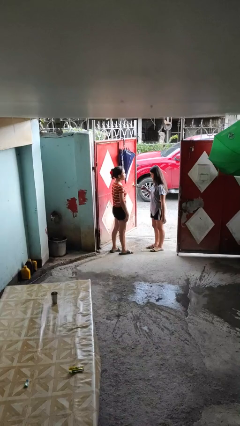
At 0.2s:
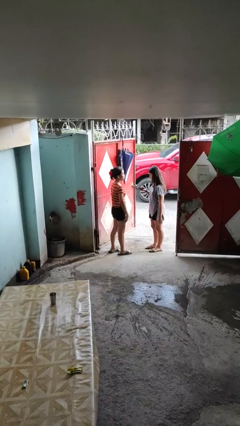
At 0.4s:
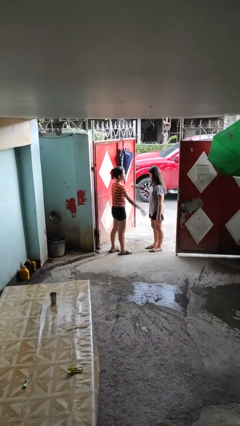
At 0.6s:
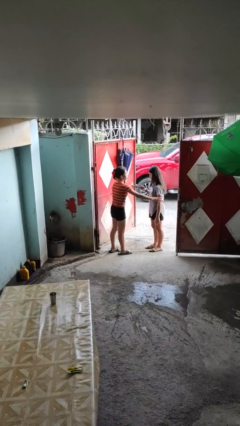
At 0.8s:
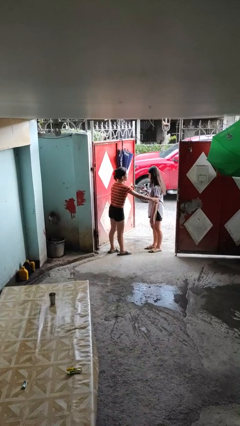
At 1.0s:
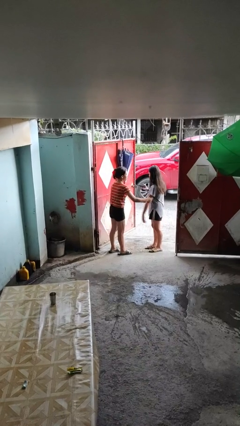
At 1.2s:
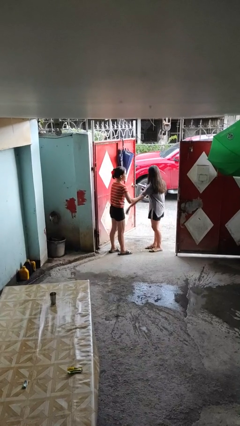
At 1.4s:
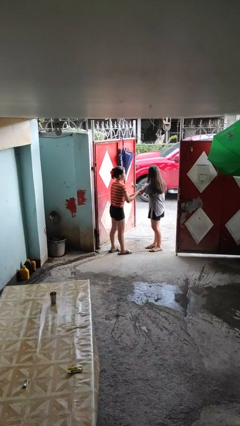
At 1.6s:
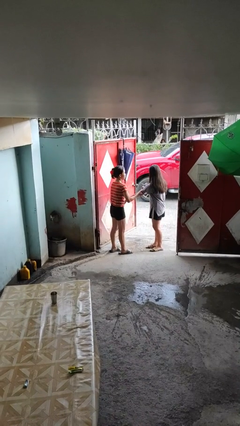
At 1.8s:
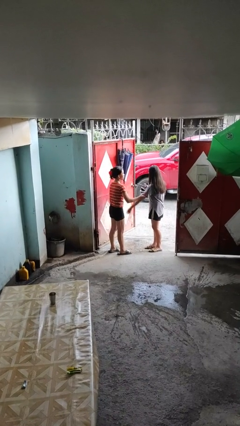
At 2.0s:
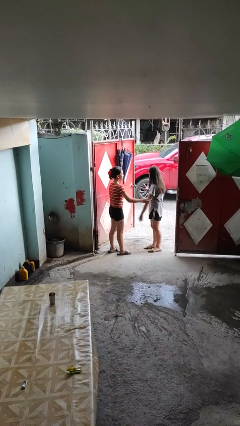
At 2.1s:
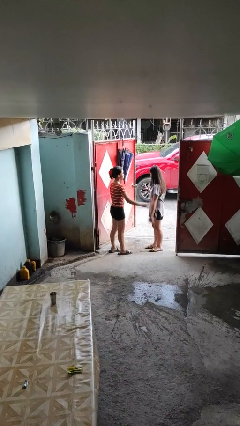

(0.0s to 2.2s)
person grabs person by bicep

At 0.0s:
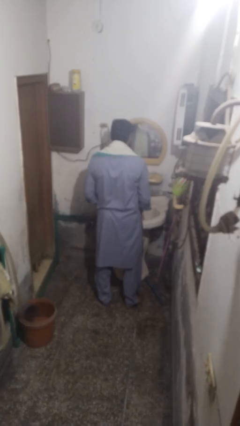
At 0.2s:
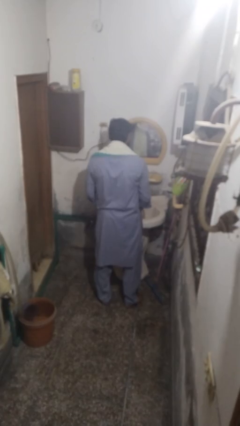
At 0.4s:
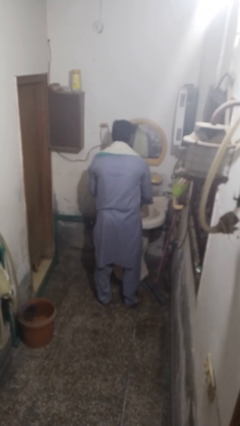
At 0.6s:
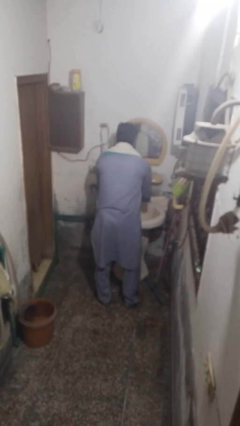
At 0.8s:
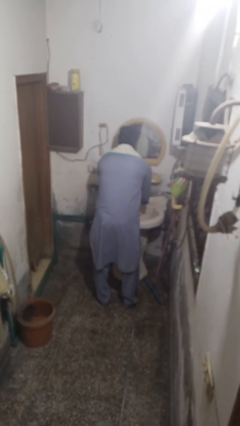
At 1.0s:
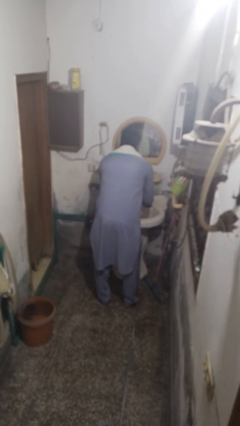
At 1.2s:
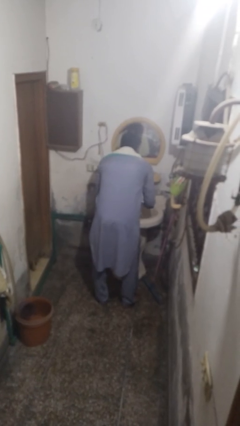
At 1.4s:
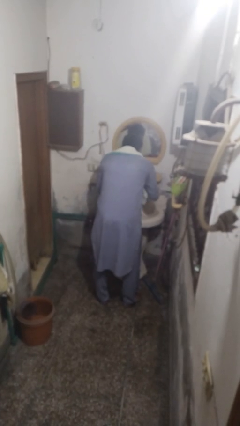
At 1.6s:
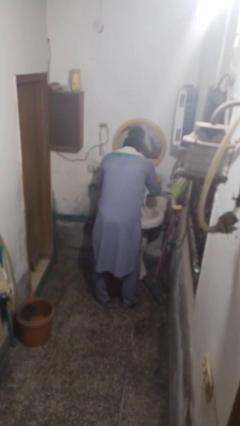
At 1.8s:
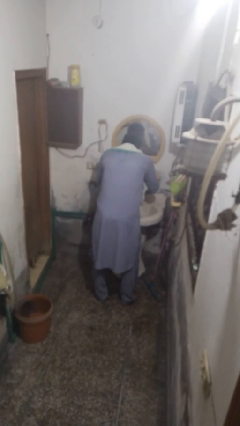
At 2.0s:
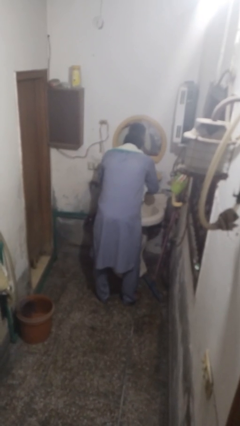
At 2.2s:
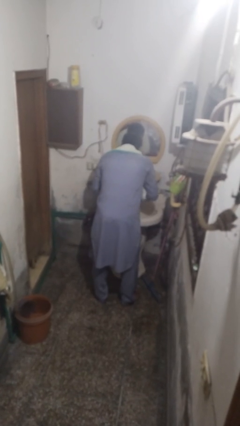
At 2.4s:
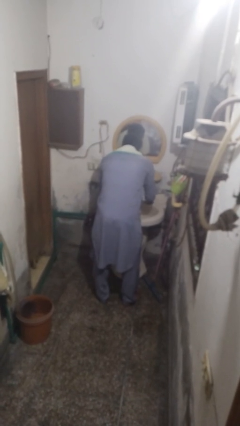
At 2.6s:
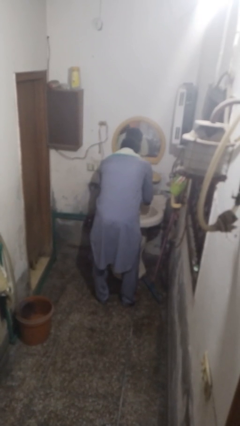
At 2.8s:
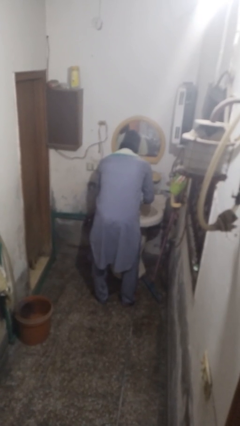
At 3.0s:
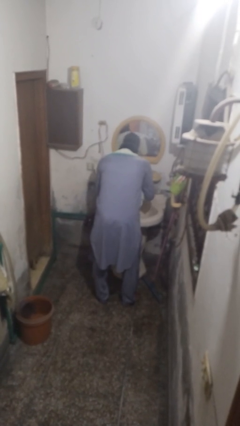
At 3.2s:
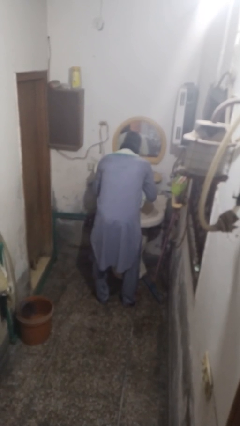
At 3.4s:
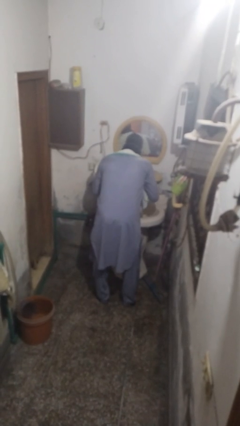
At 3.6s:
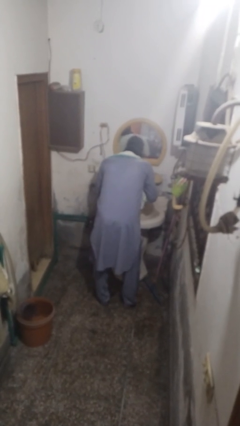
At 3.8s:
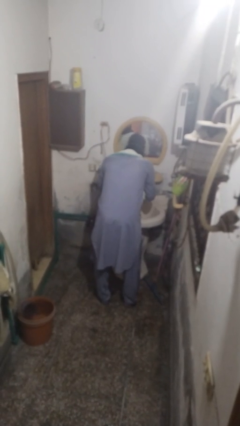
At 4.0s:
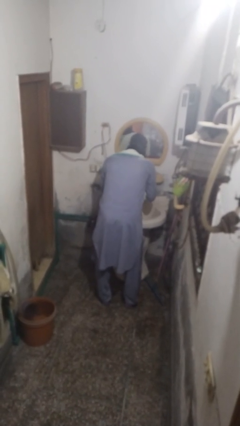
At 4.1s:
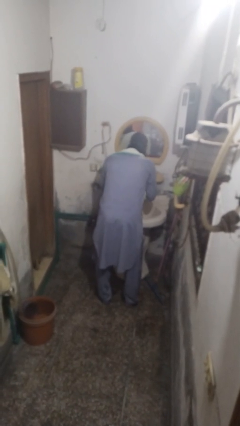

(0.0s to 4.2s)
person washes face

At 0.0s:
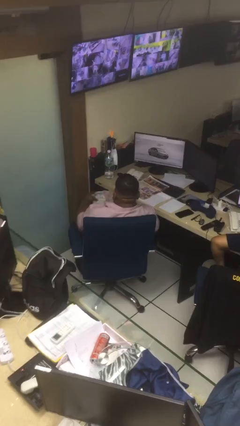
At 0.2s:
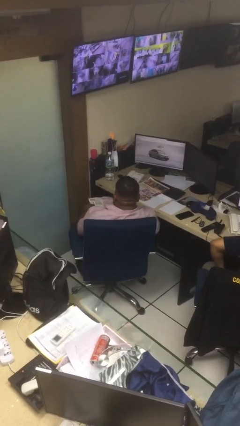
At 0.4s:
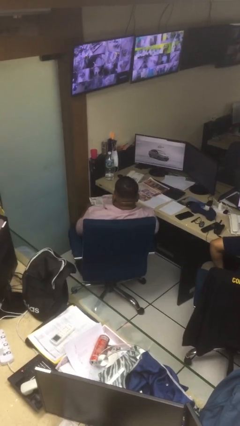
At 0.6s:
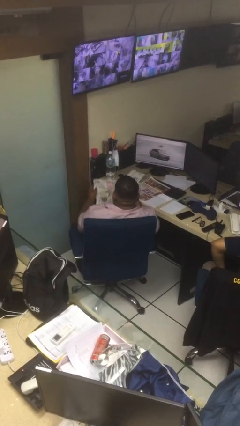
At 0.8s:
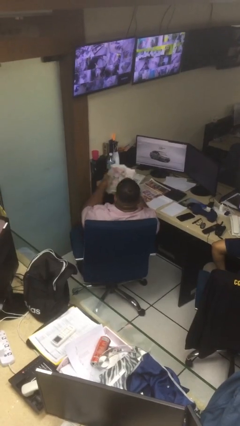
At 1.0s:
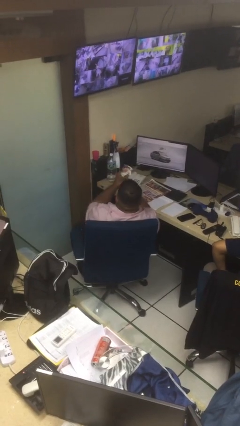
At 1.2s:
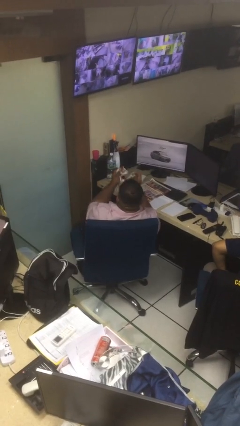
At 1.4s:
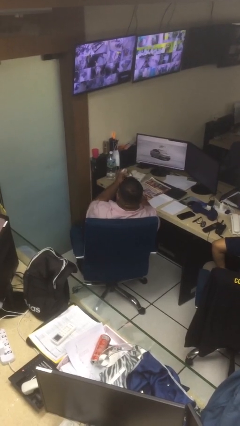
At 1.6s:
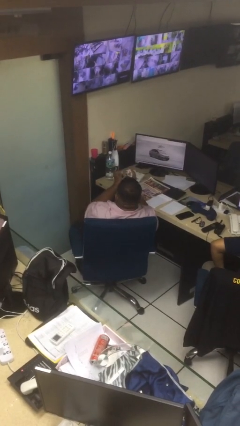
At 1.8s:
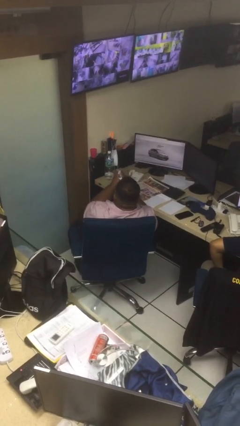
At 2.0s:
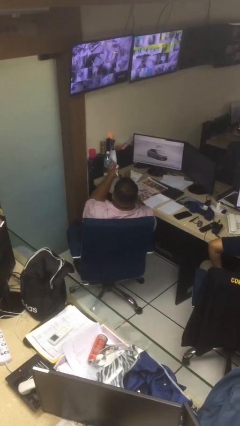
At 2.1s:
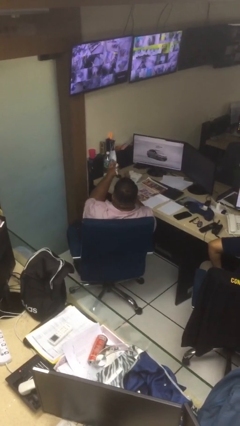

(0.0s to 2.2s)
person crumples paper

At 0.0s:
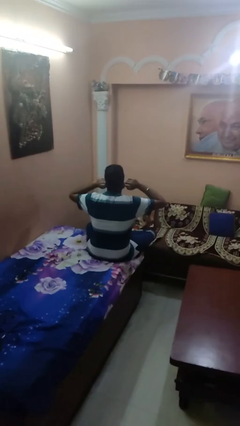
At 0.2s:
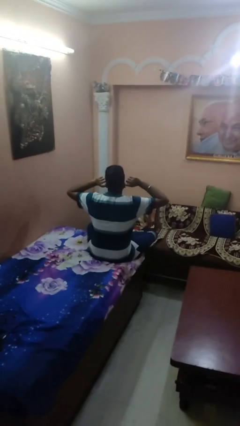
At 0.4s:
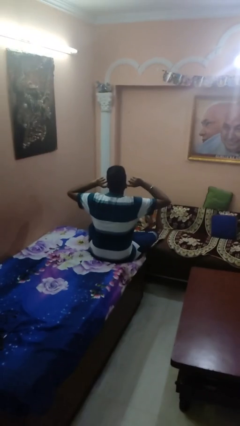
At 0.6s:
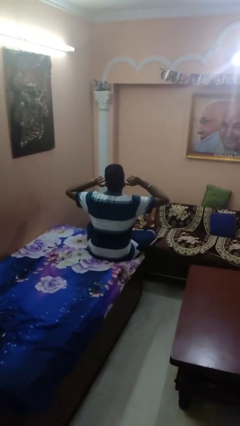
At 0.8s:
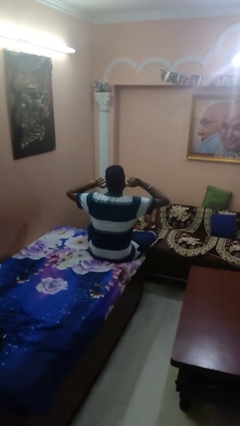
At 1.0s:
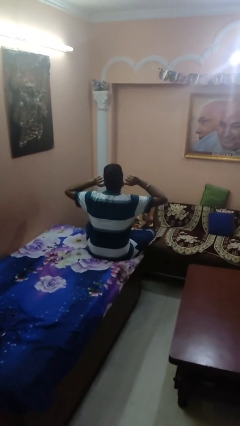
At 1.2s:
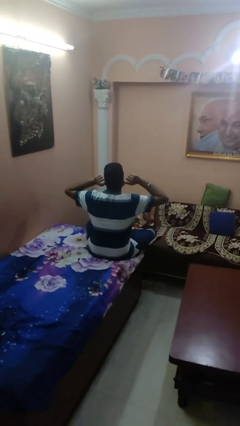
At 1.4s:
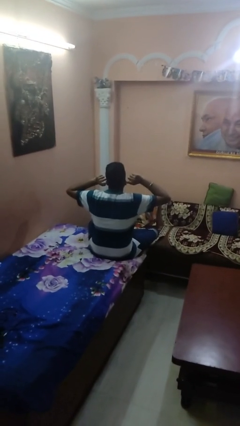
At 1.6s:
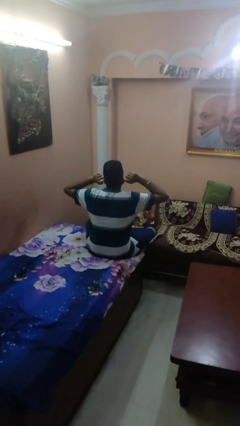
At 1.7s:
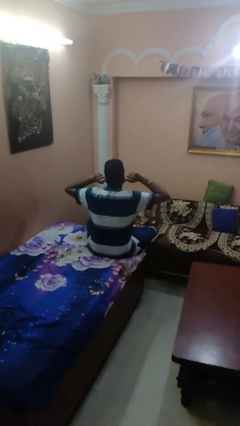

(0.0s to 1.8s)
person puts fingers in ear

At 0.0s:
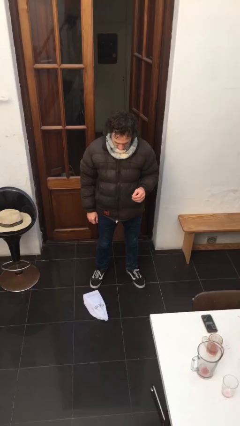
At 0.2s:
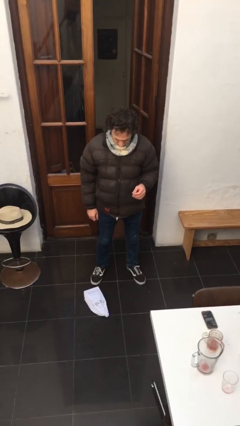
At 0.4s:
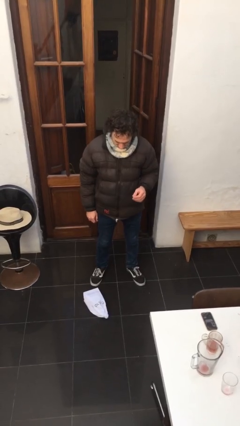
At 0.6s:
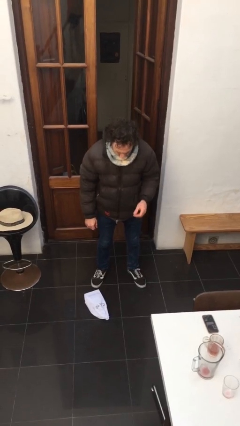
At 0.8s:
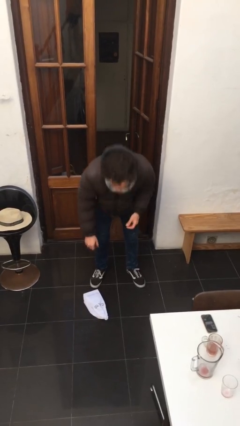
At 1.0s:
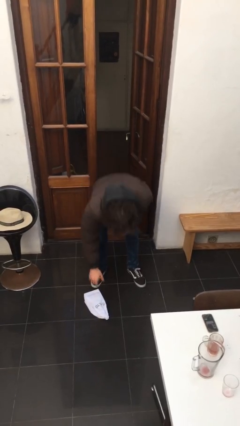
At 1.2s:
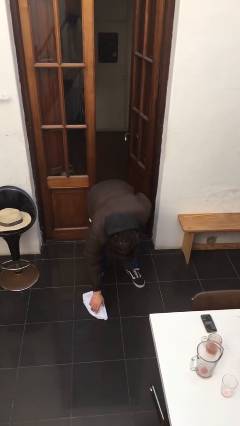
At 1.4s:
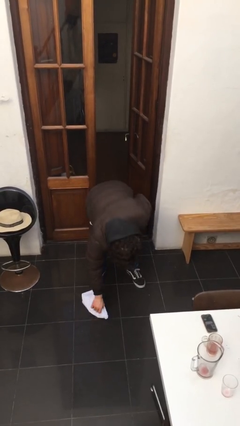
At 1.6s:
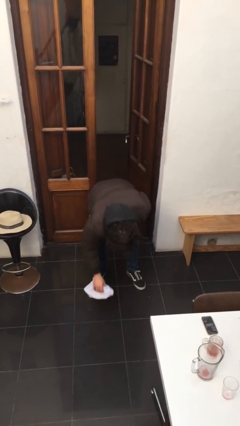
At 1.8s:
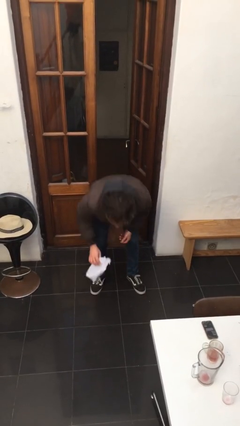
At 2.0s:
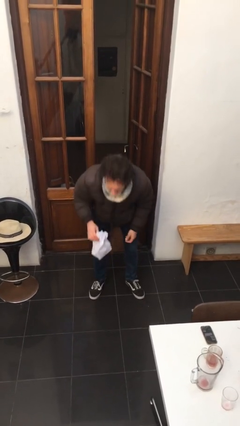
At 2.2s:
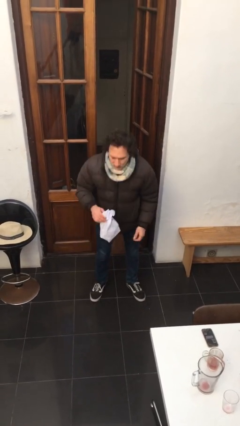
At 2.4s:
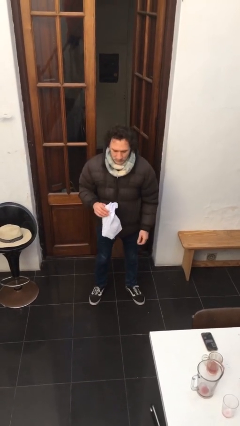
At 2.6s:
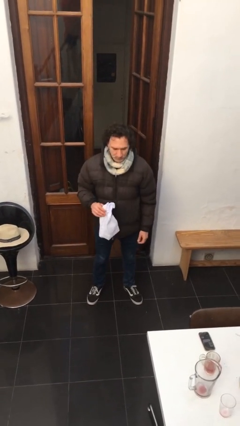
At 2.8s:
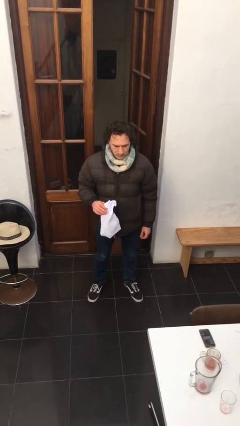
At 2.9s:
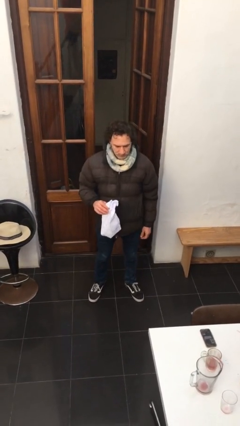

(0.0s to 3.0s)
person picks up object from floor

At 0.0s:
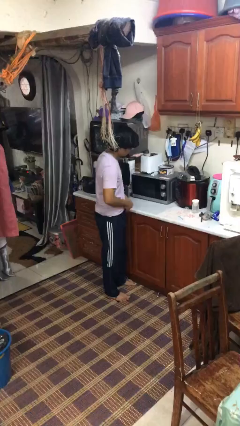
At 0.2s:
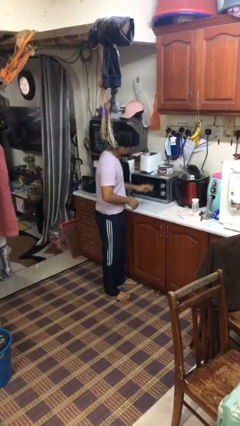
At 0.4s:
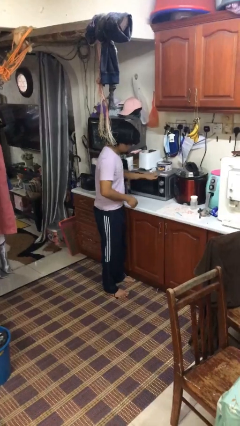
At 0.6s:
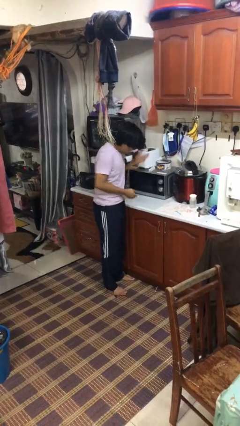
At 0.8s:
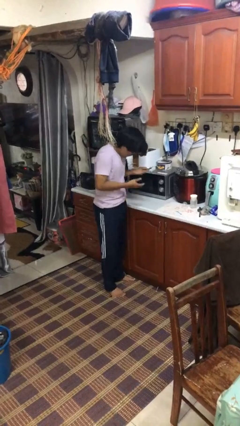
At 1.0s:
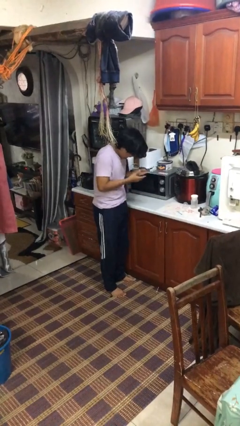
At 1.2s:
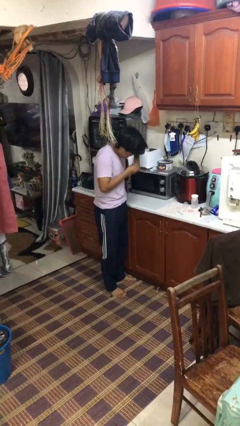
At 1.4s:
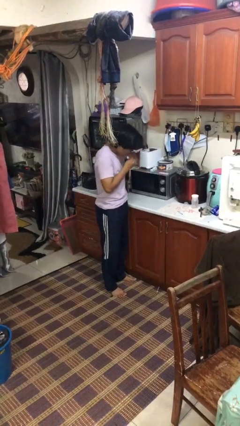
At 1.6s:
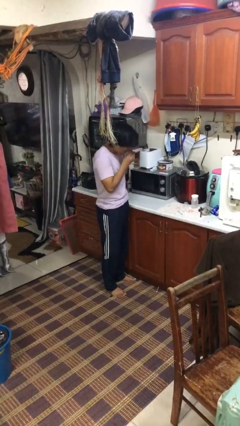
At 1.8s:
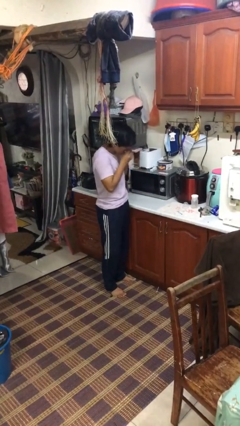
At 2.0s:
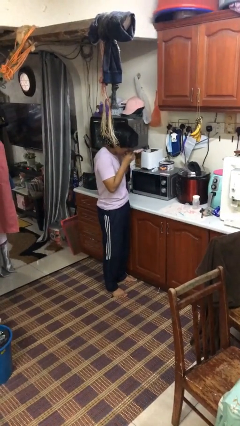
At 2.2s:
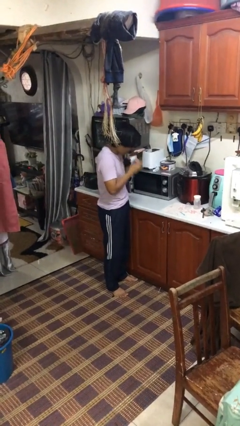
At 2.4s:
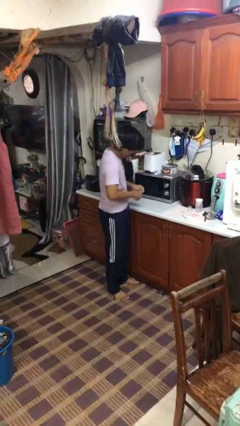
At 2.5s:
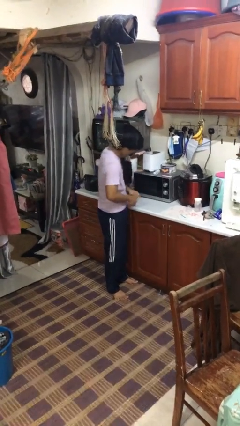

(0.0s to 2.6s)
person burns hand

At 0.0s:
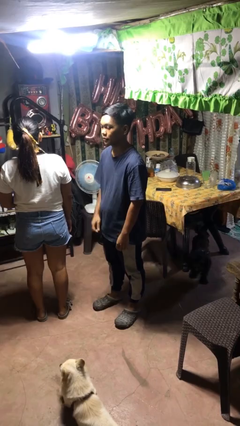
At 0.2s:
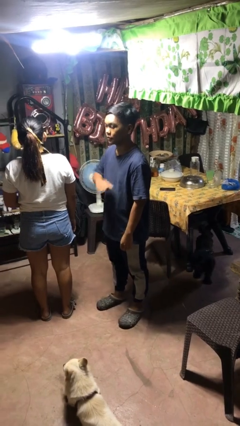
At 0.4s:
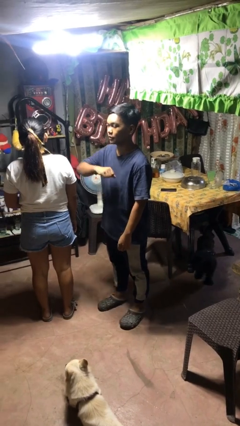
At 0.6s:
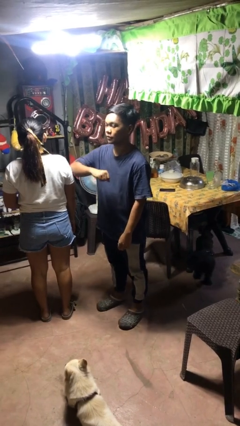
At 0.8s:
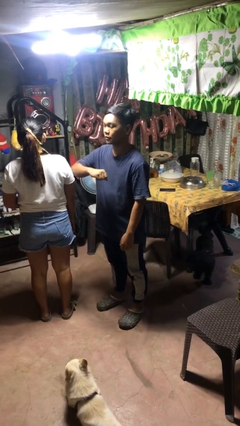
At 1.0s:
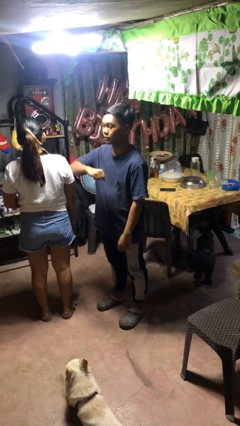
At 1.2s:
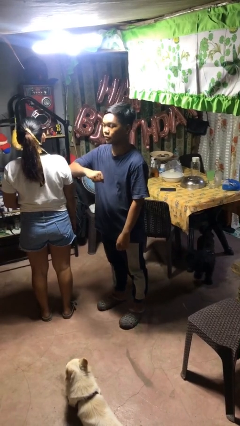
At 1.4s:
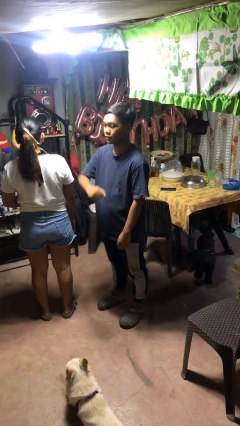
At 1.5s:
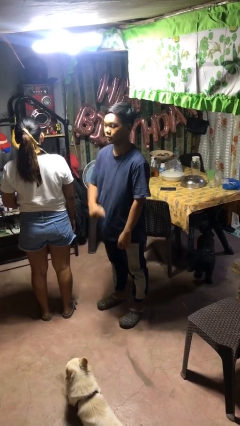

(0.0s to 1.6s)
person nudges person with elbow
